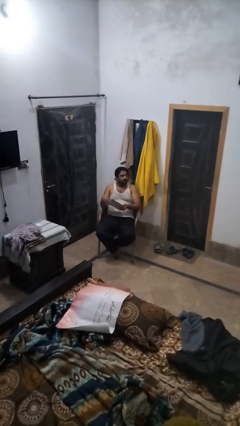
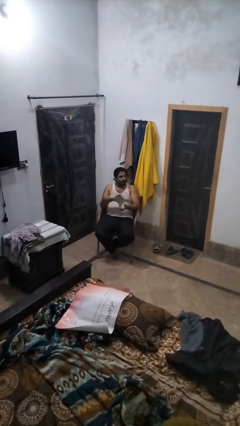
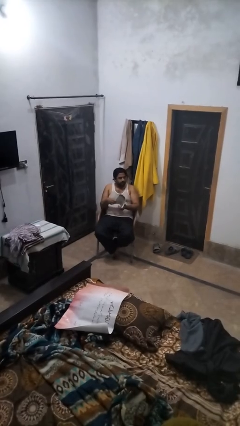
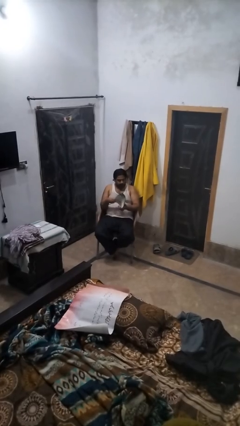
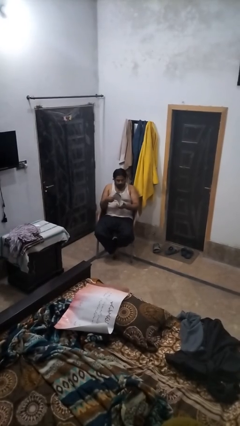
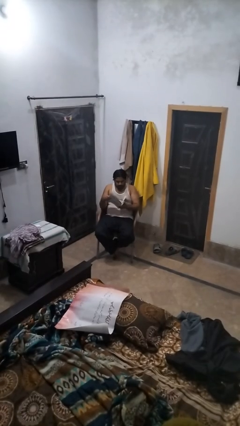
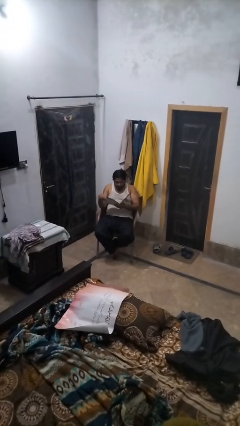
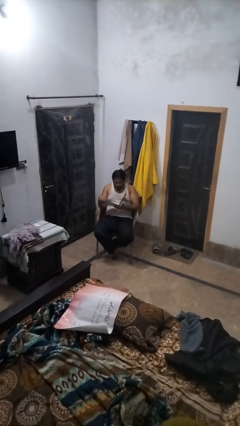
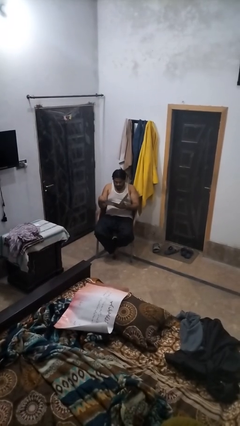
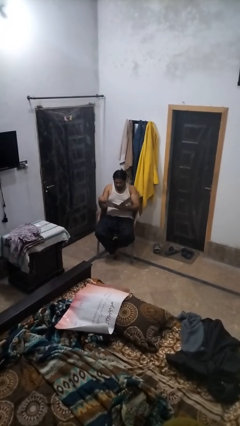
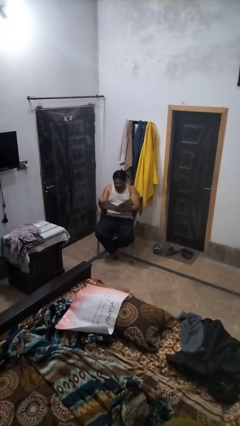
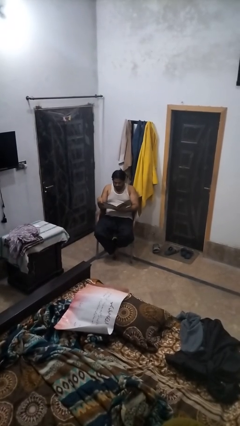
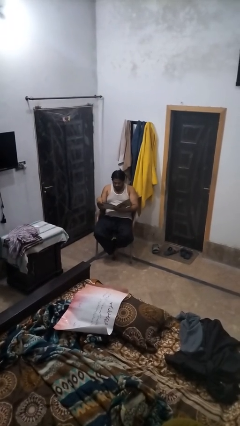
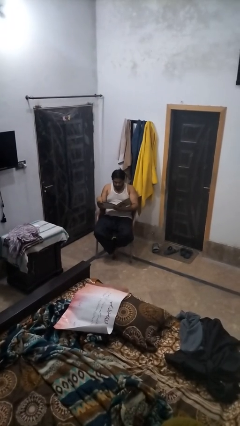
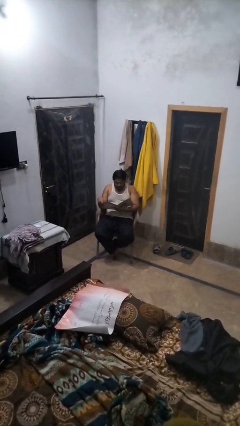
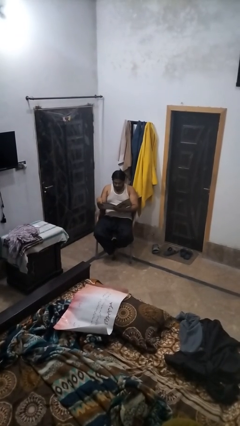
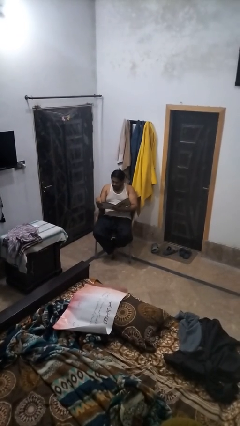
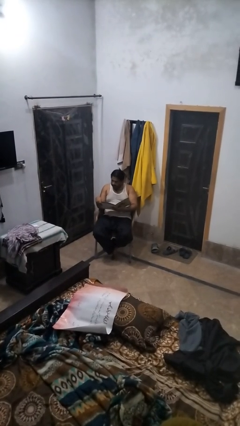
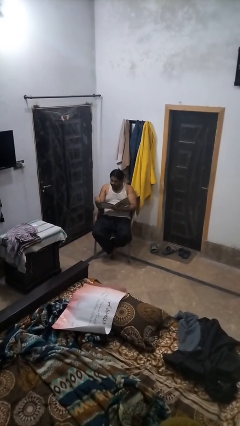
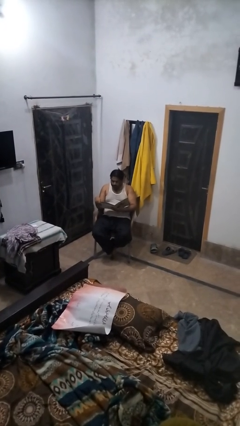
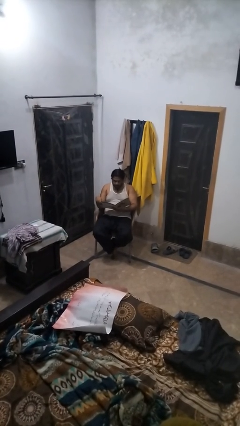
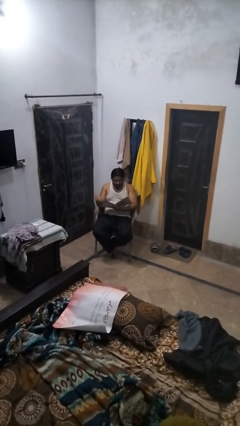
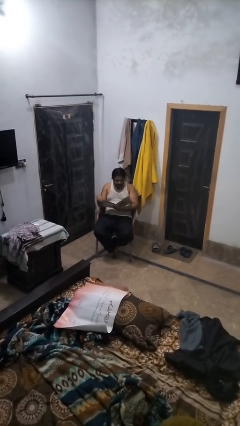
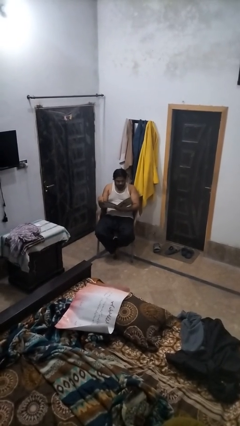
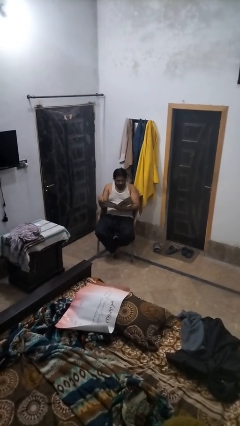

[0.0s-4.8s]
person reads magazine

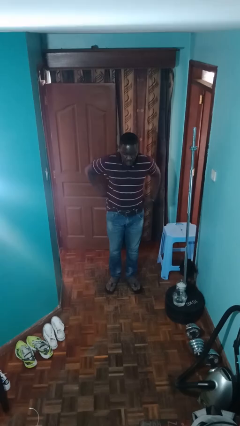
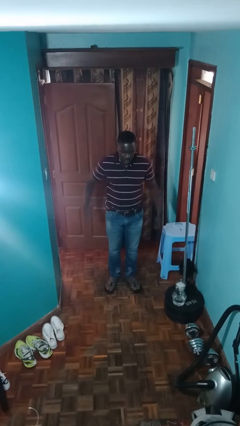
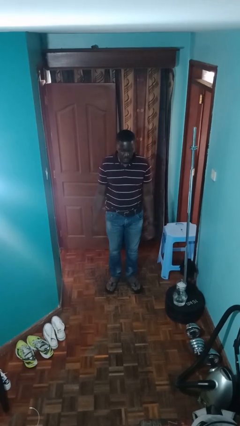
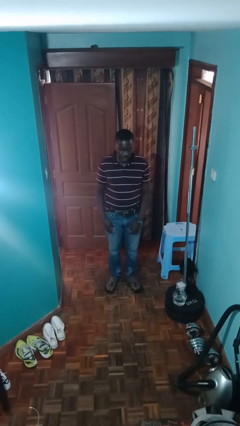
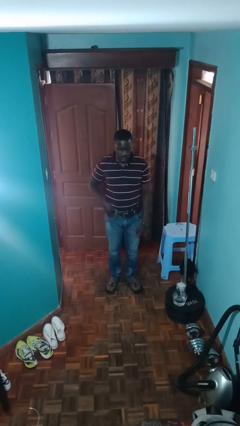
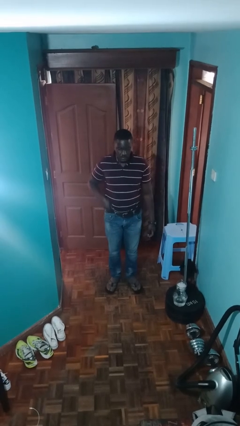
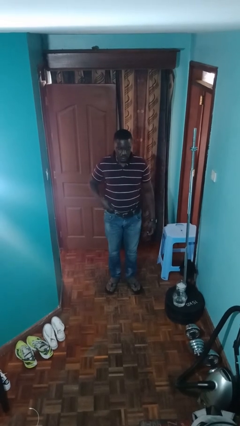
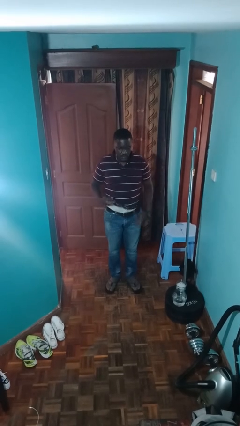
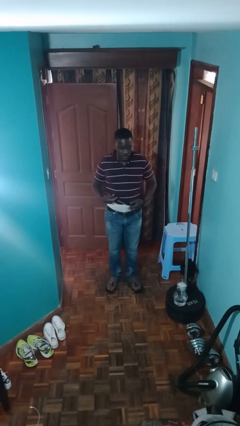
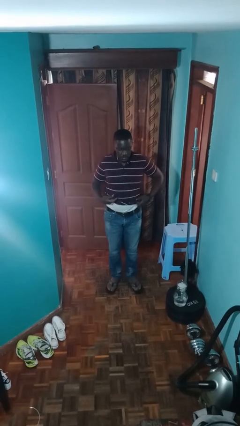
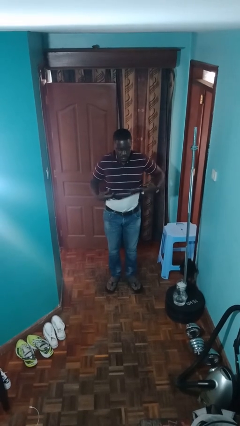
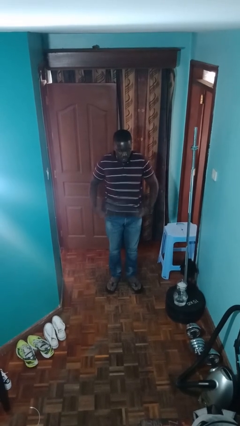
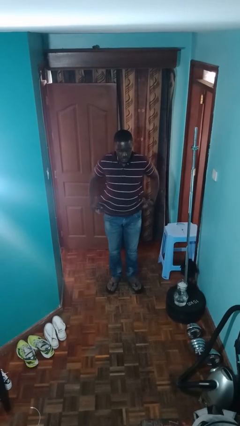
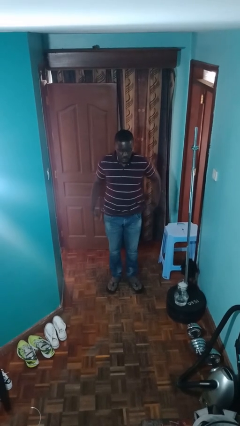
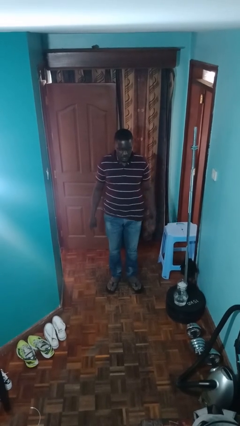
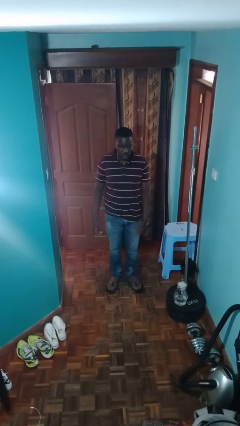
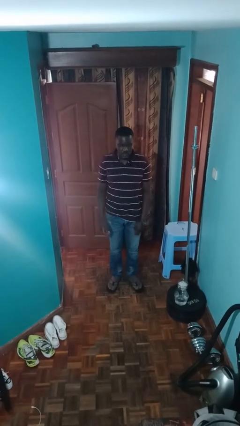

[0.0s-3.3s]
person untucks shirt

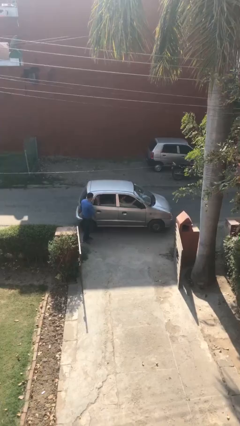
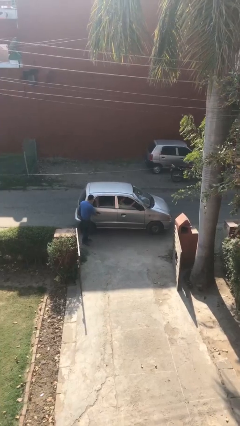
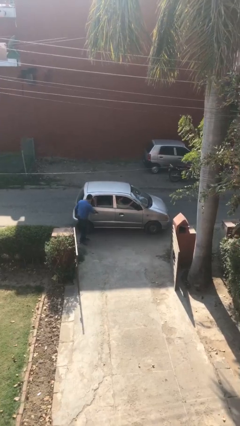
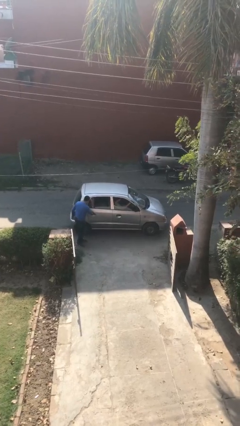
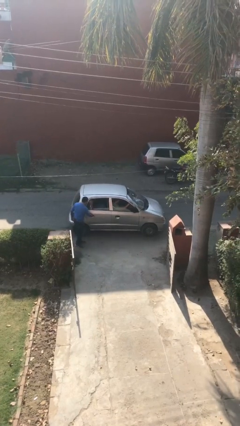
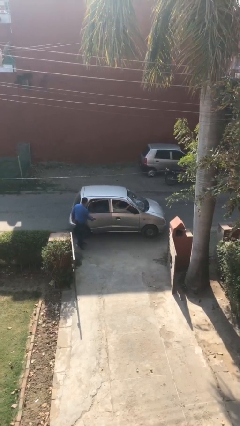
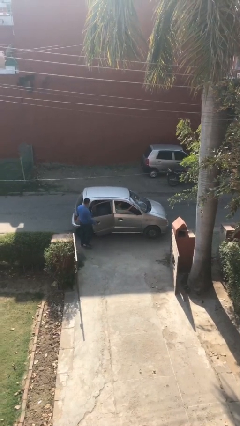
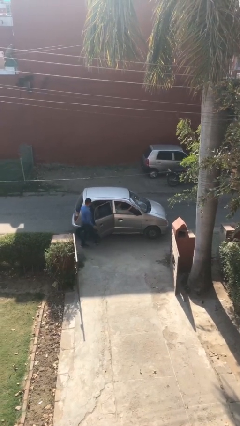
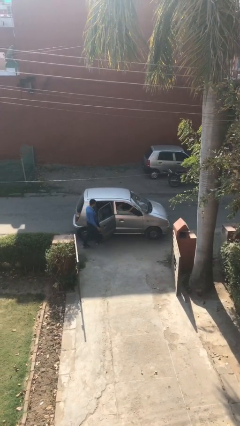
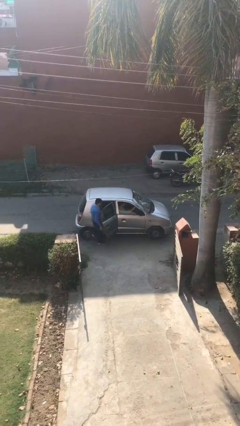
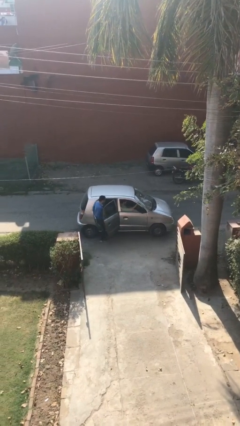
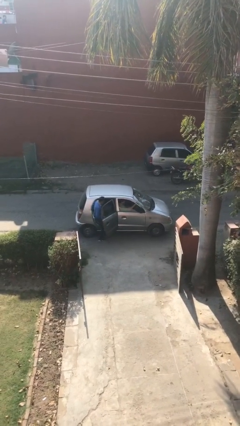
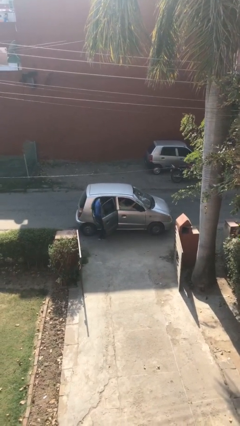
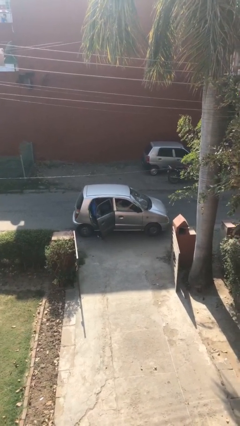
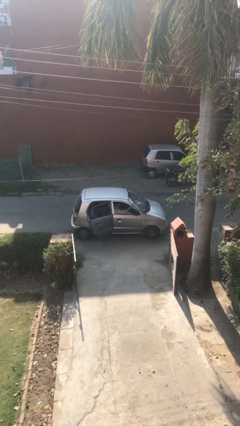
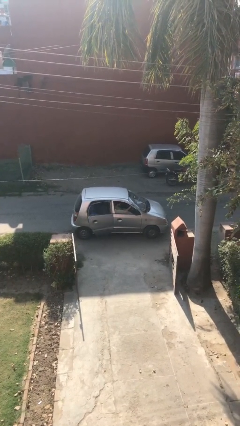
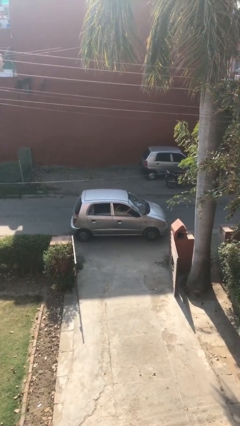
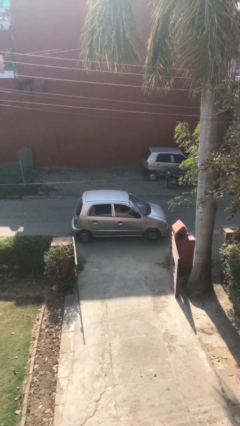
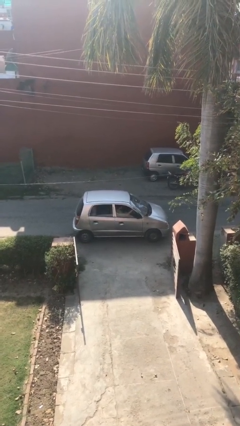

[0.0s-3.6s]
car picks up person

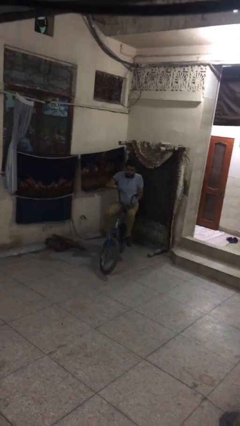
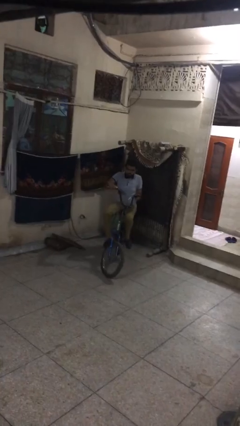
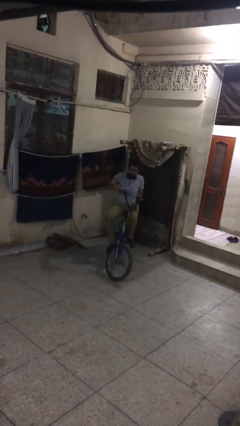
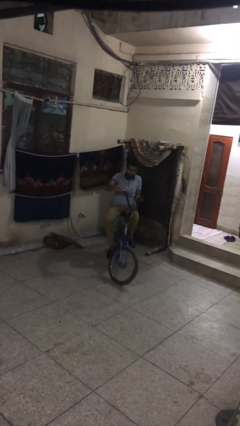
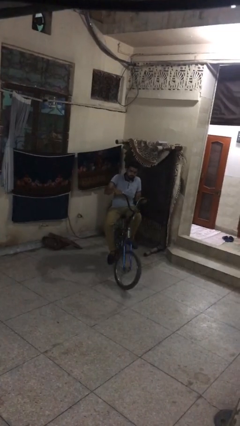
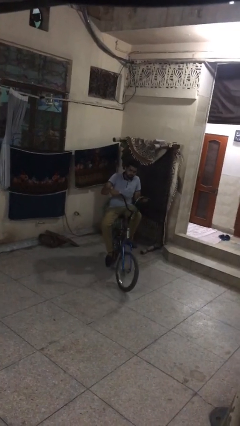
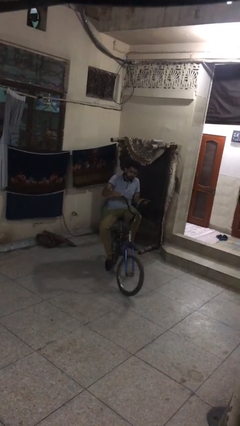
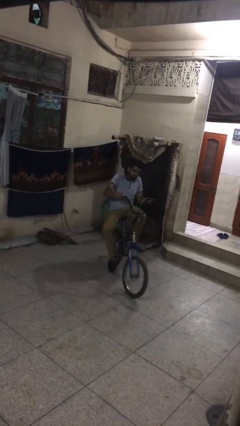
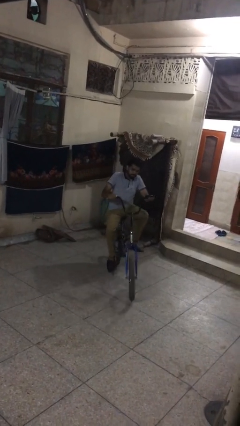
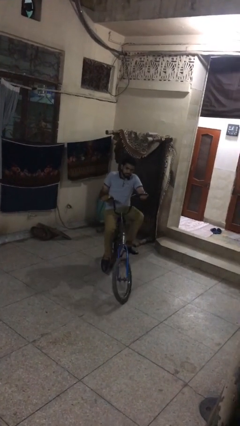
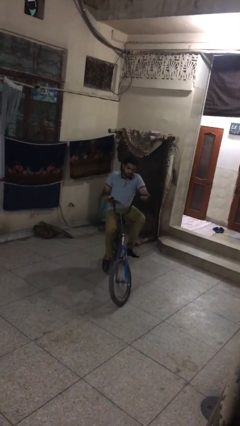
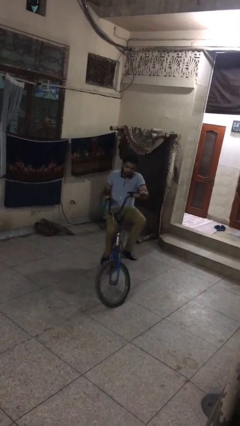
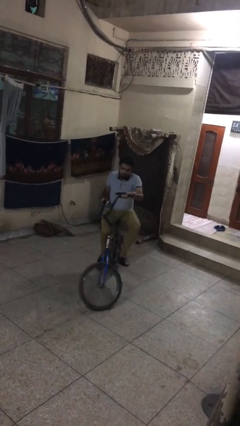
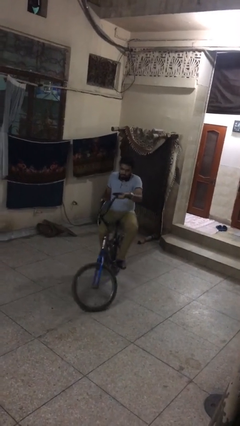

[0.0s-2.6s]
person rides bicycle

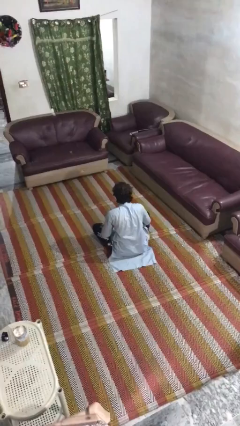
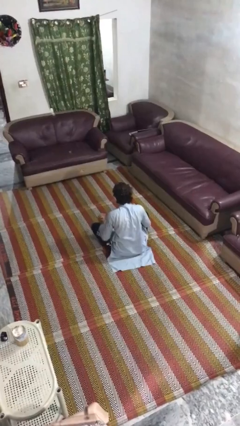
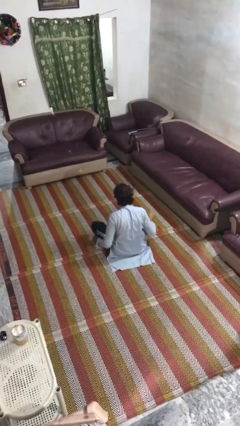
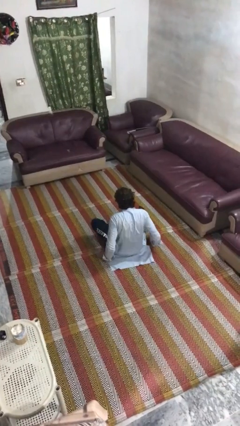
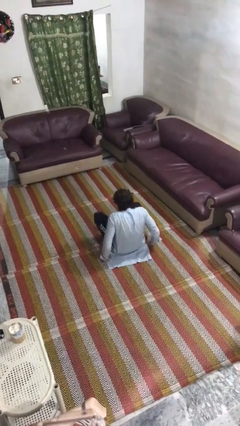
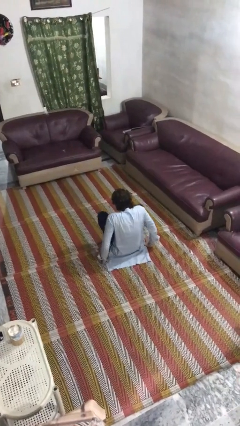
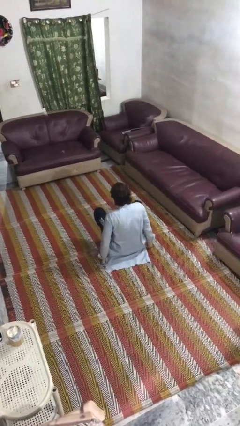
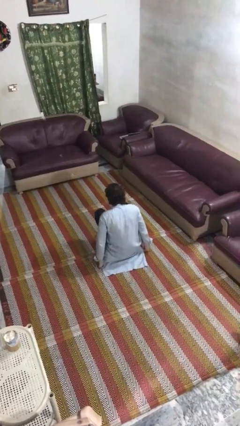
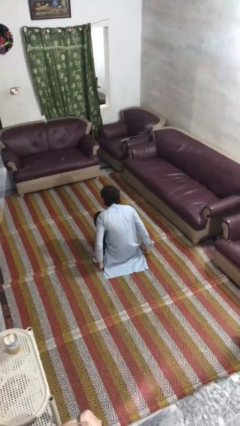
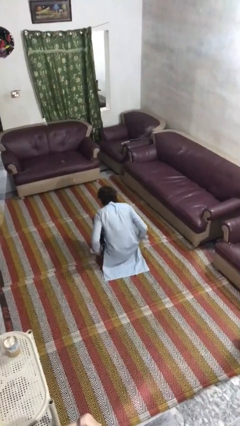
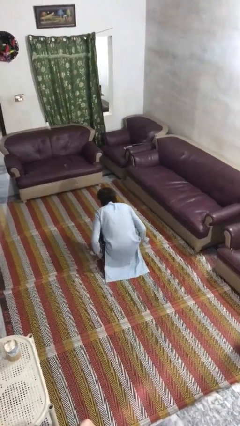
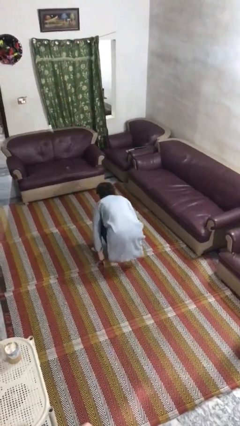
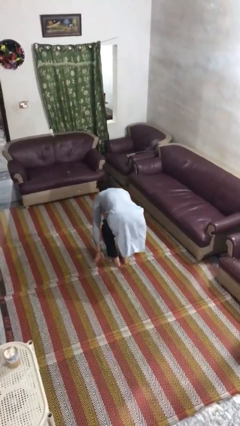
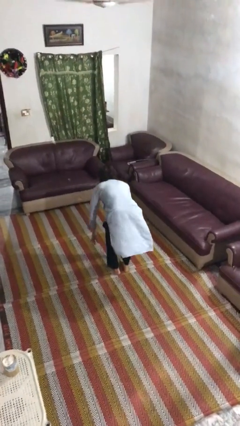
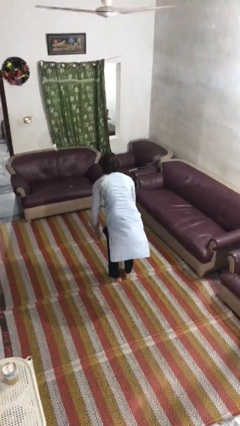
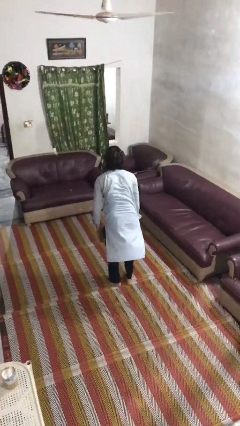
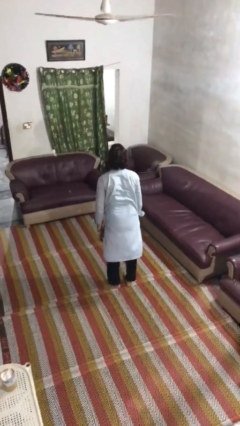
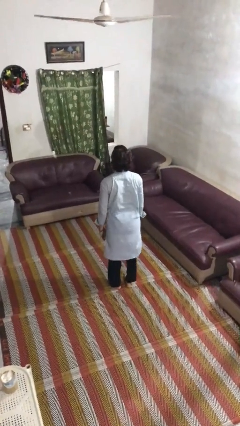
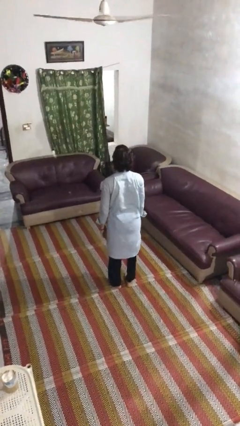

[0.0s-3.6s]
person stands up from floor
